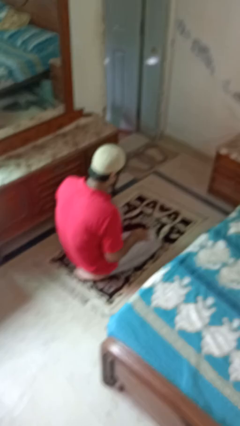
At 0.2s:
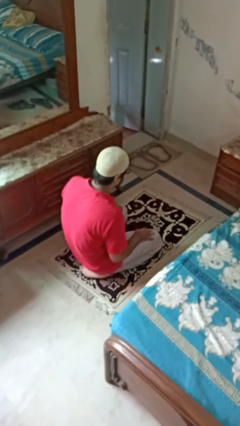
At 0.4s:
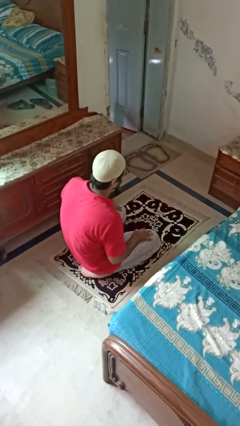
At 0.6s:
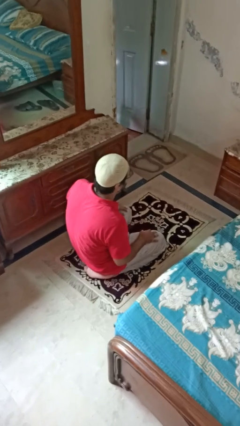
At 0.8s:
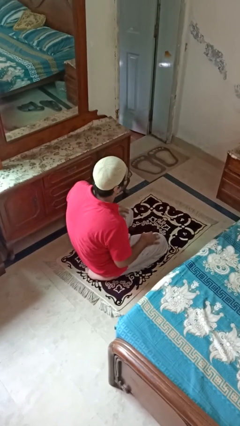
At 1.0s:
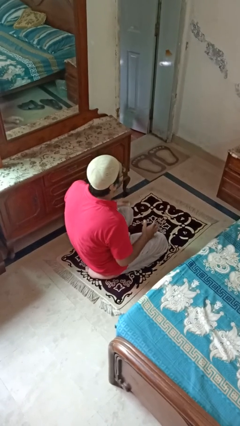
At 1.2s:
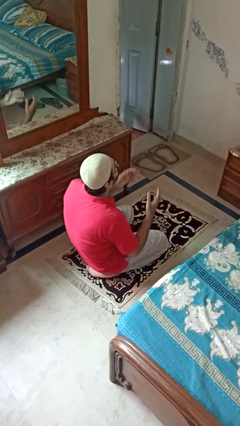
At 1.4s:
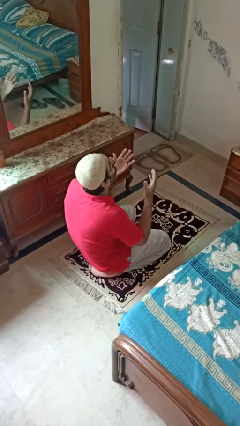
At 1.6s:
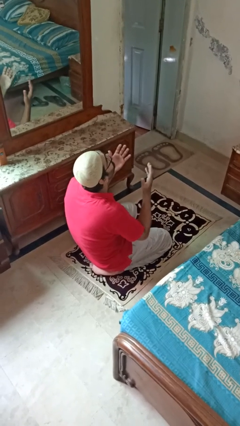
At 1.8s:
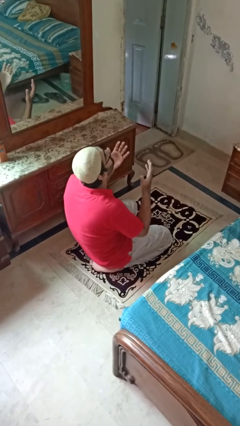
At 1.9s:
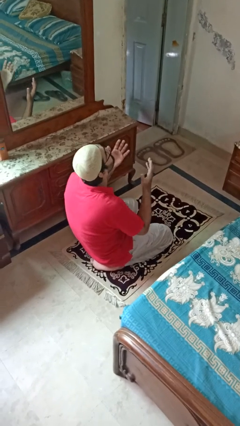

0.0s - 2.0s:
person prays

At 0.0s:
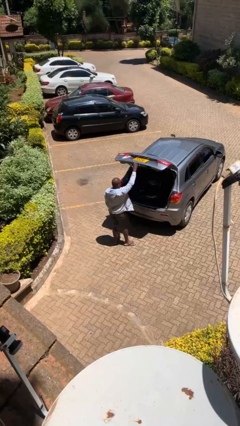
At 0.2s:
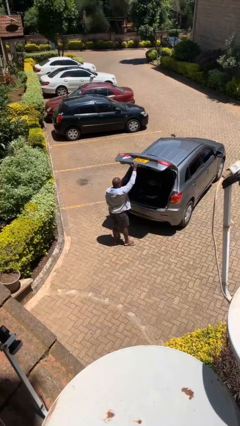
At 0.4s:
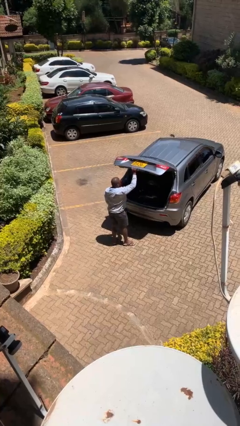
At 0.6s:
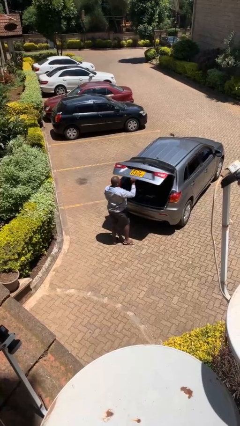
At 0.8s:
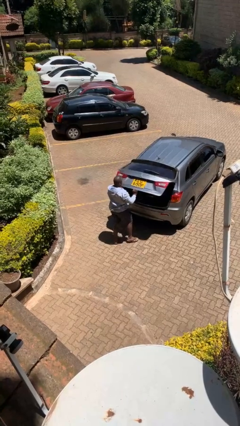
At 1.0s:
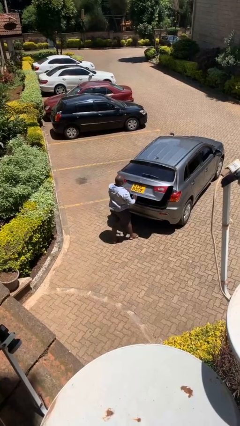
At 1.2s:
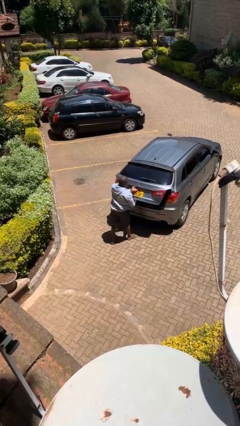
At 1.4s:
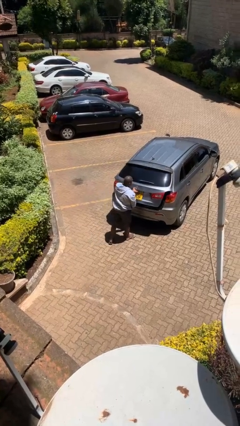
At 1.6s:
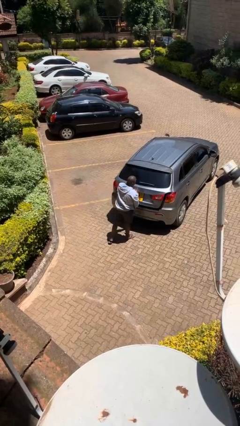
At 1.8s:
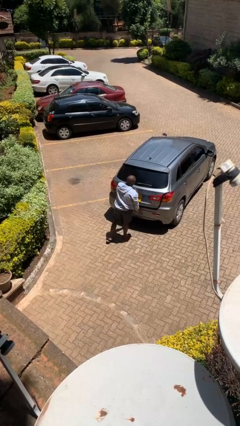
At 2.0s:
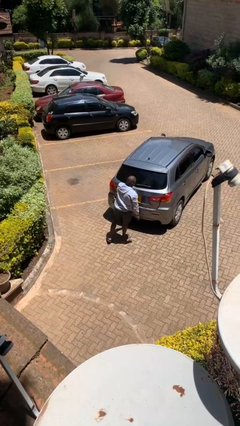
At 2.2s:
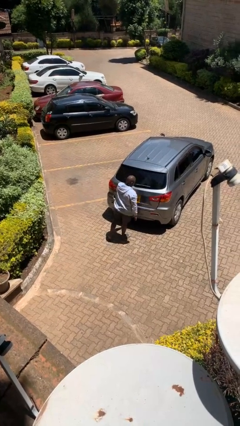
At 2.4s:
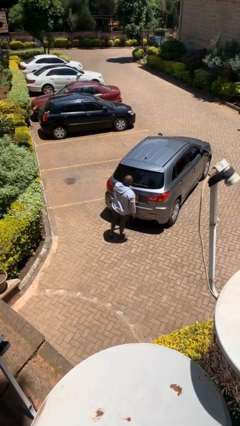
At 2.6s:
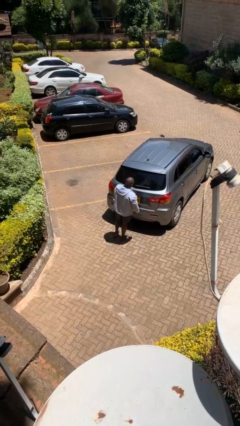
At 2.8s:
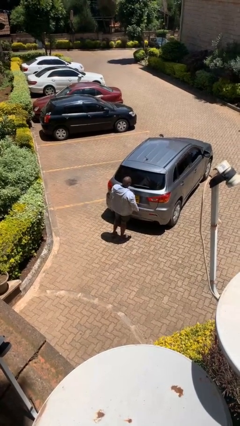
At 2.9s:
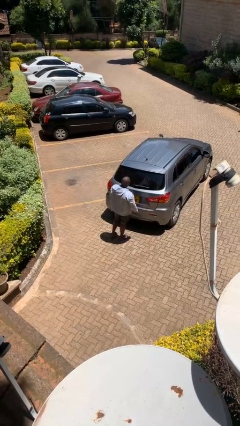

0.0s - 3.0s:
person closes car trunk

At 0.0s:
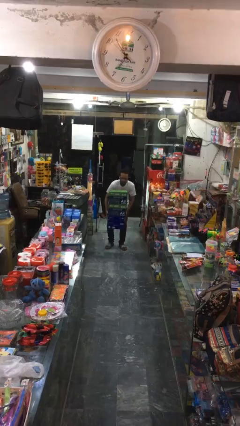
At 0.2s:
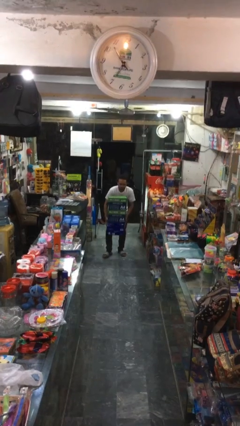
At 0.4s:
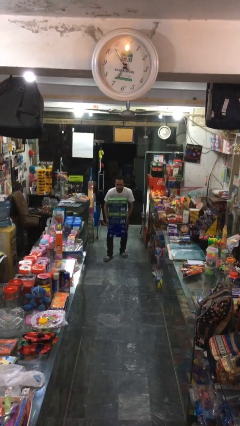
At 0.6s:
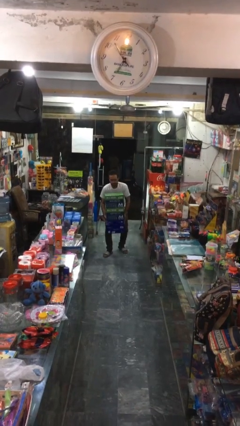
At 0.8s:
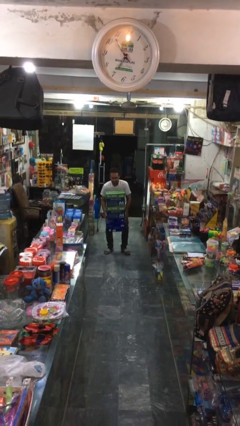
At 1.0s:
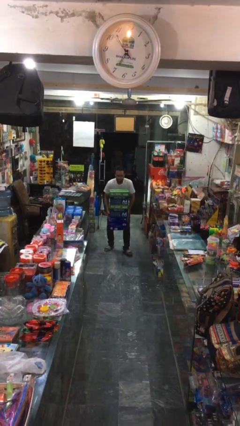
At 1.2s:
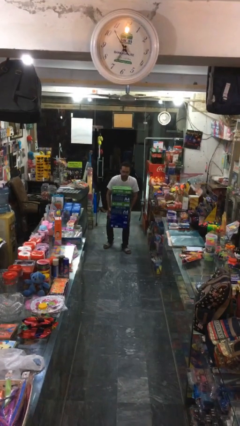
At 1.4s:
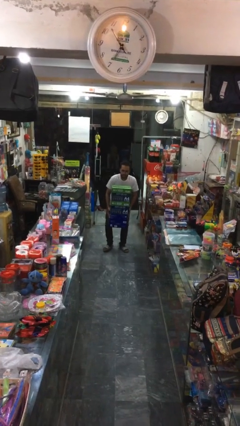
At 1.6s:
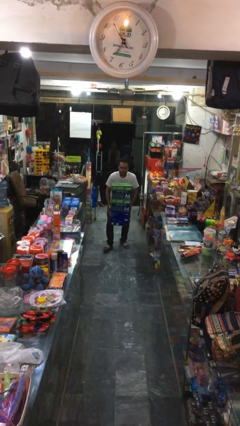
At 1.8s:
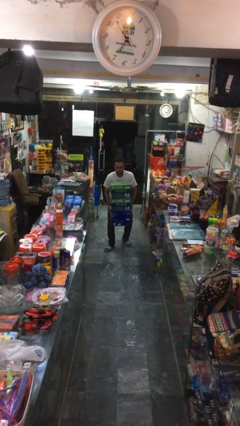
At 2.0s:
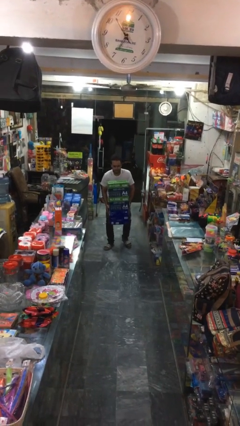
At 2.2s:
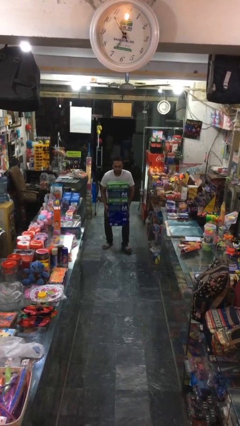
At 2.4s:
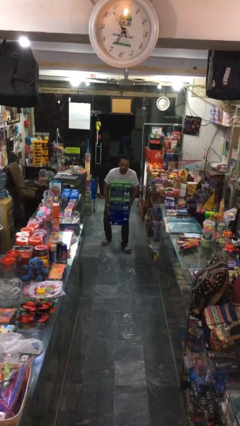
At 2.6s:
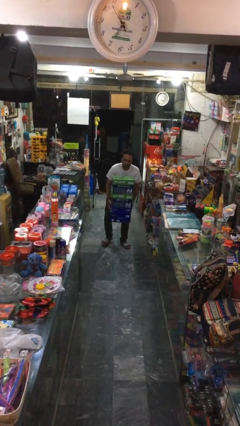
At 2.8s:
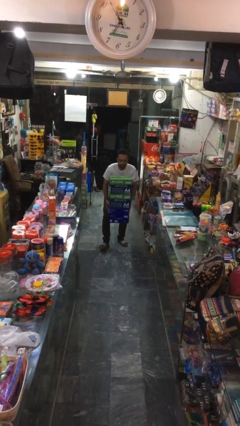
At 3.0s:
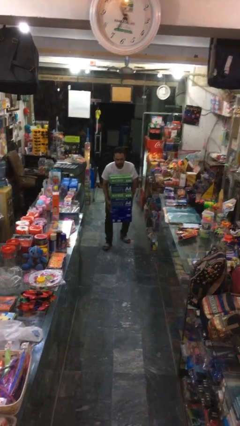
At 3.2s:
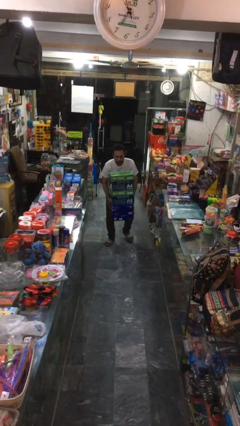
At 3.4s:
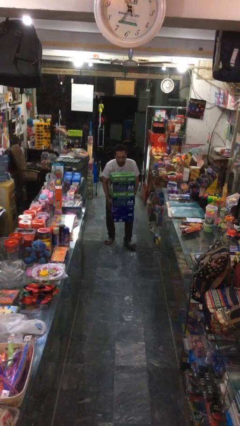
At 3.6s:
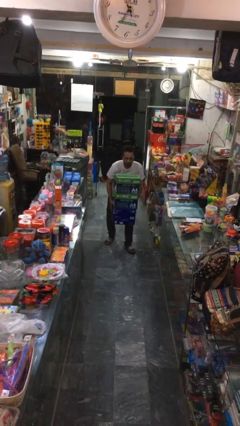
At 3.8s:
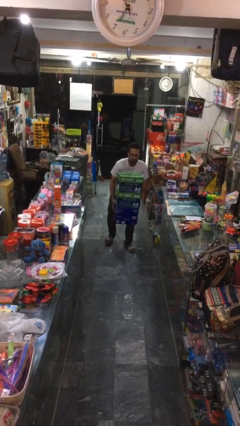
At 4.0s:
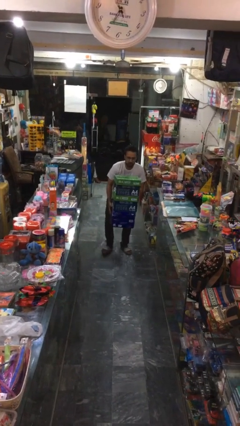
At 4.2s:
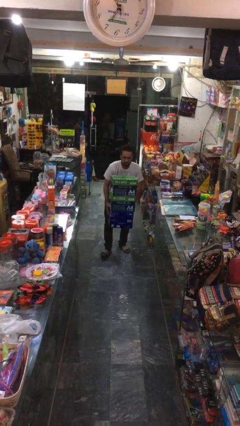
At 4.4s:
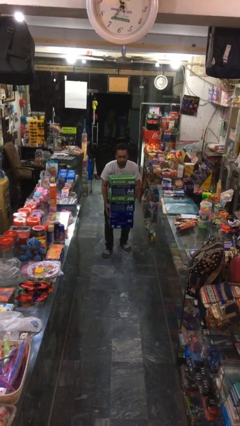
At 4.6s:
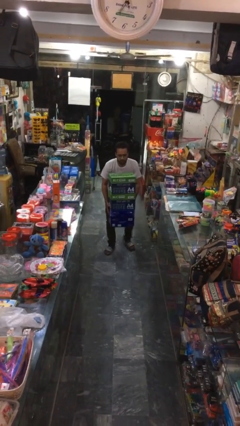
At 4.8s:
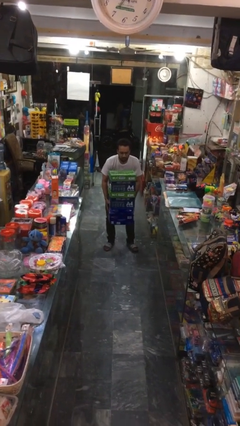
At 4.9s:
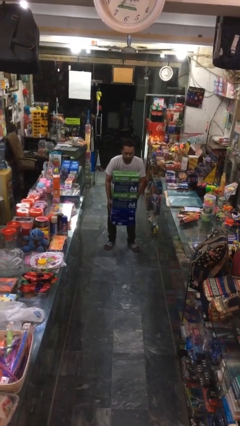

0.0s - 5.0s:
person carries heavy object

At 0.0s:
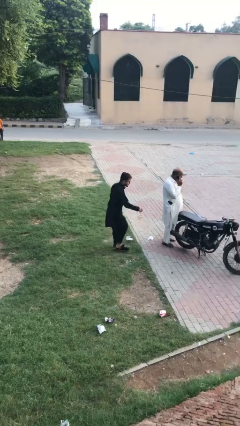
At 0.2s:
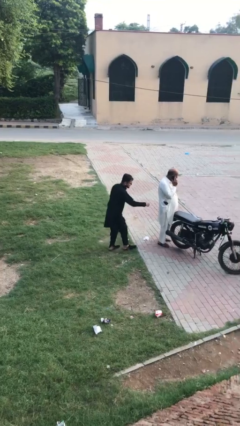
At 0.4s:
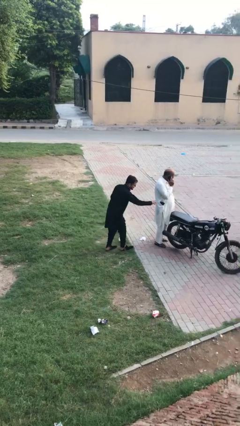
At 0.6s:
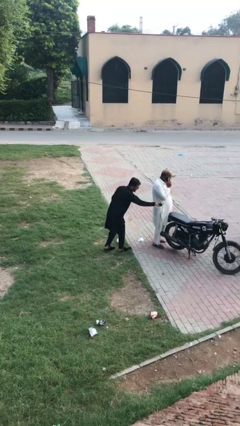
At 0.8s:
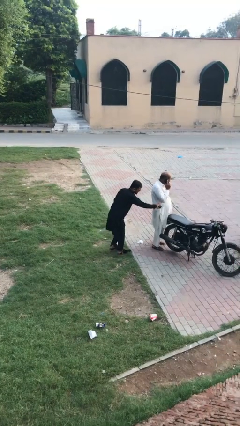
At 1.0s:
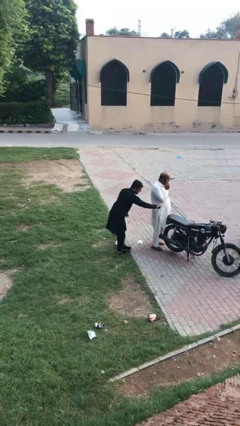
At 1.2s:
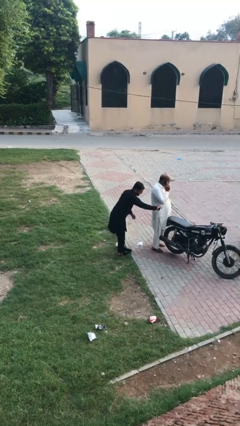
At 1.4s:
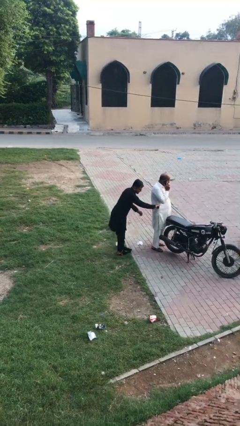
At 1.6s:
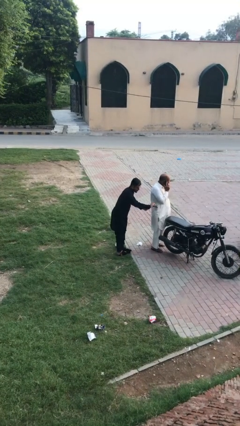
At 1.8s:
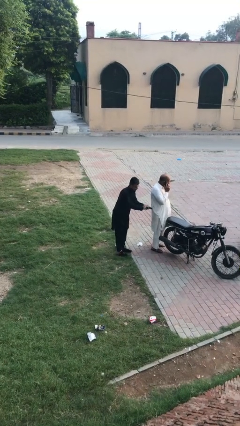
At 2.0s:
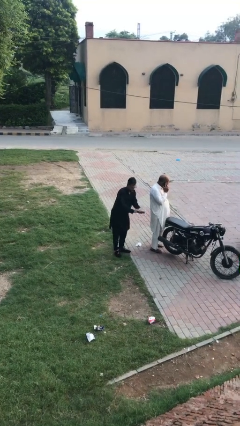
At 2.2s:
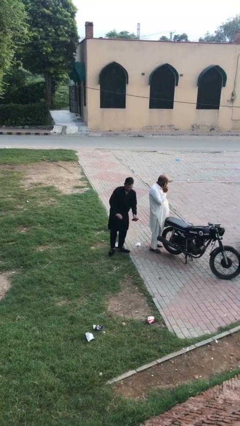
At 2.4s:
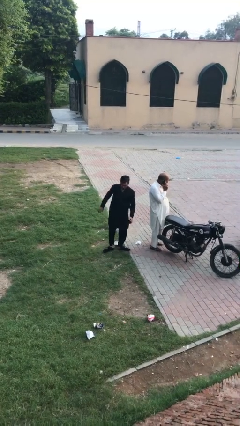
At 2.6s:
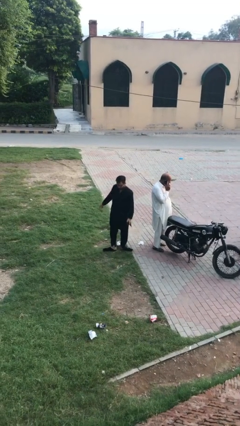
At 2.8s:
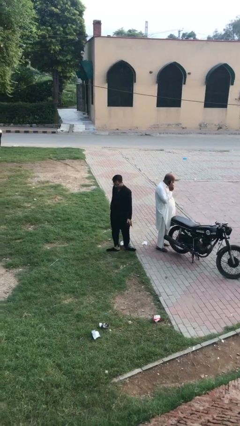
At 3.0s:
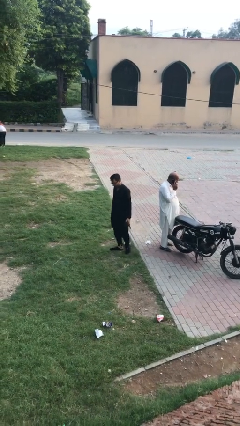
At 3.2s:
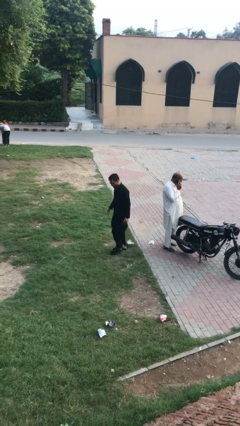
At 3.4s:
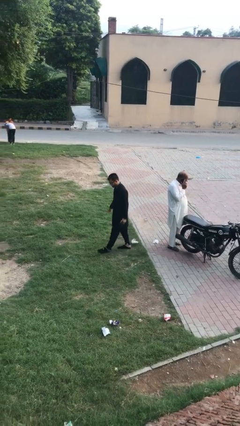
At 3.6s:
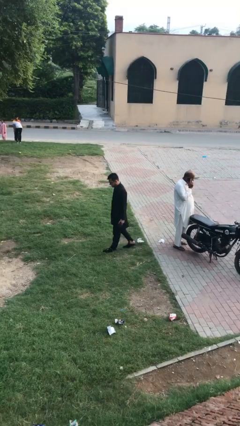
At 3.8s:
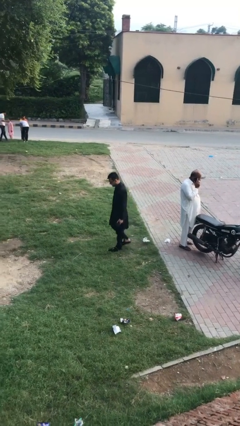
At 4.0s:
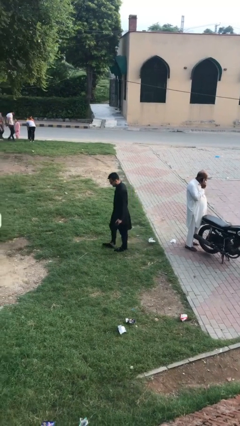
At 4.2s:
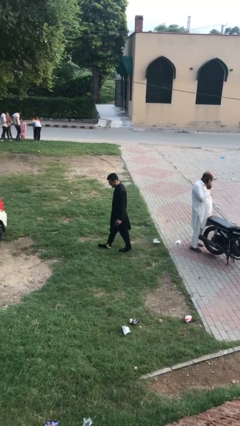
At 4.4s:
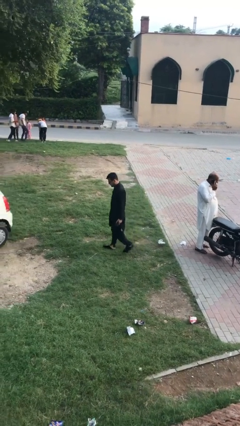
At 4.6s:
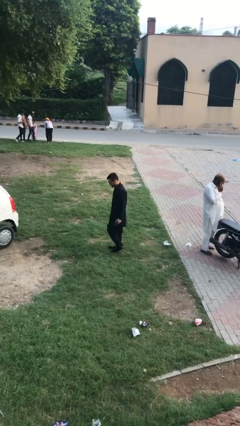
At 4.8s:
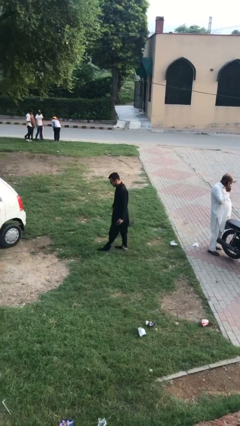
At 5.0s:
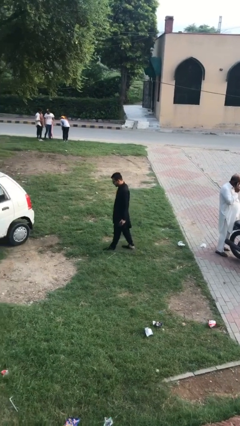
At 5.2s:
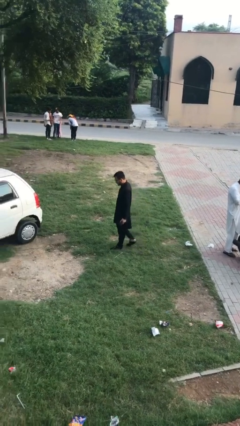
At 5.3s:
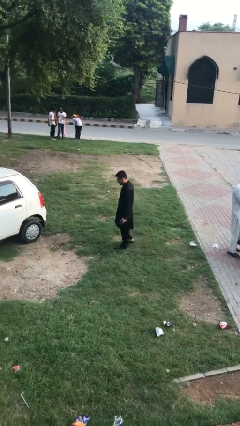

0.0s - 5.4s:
person steals object from person

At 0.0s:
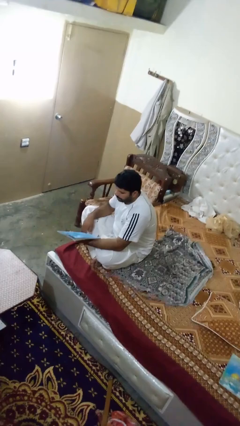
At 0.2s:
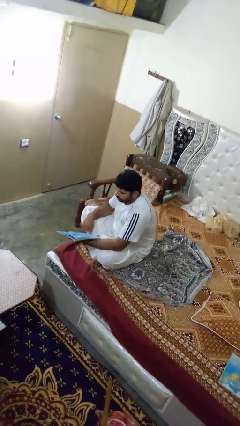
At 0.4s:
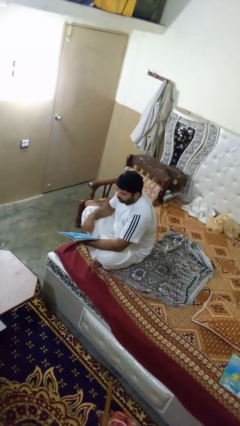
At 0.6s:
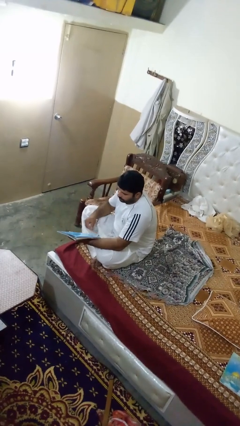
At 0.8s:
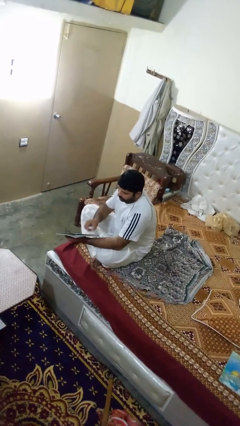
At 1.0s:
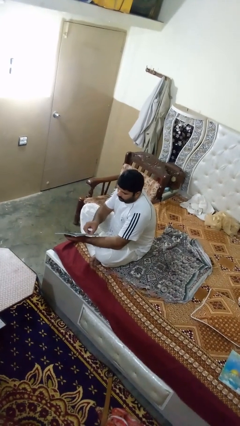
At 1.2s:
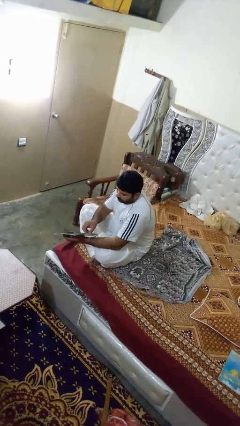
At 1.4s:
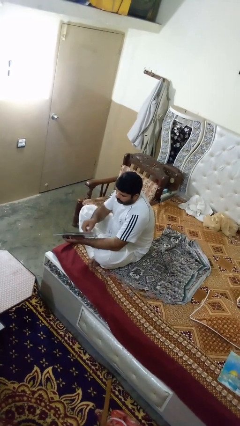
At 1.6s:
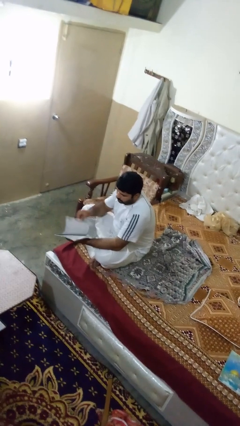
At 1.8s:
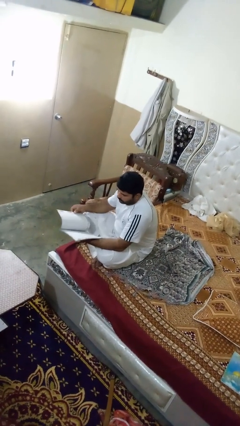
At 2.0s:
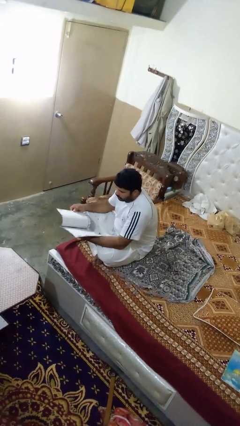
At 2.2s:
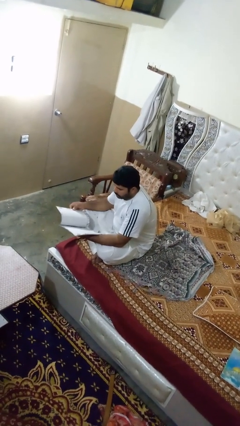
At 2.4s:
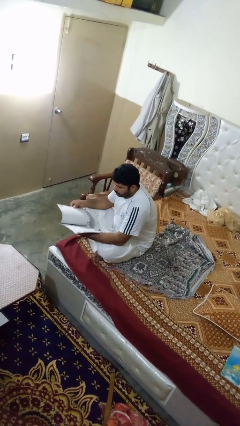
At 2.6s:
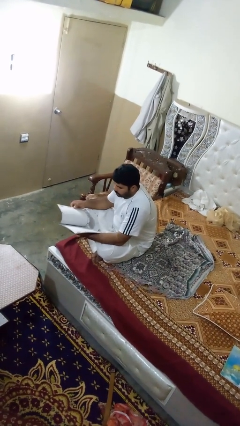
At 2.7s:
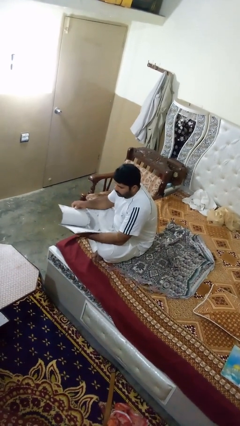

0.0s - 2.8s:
person reads magazine
